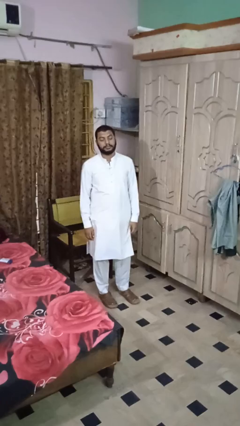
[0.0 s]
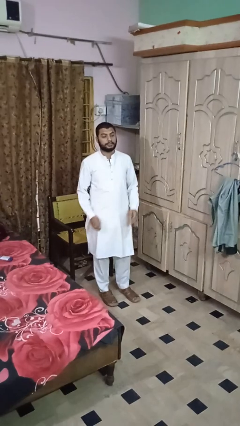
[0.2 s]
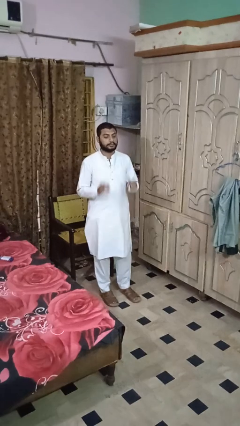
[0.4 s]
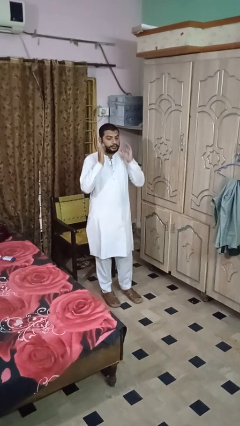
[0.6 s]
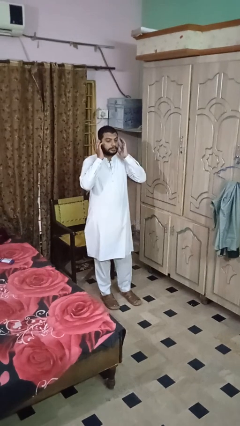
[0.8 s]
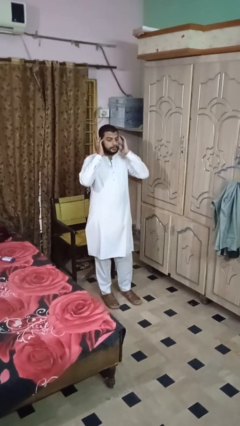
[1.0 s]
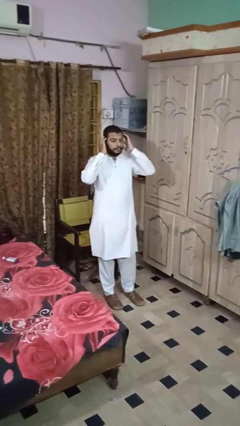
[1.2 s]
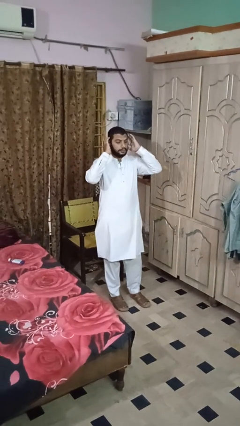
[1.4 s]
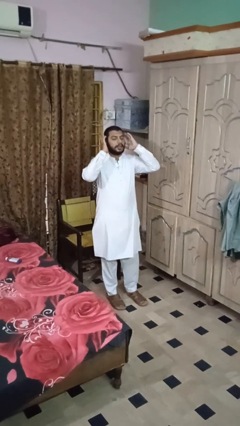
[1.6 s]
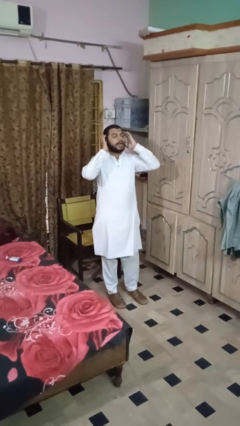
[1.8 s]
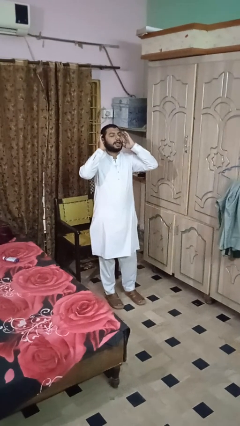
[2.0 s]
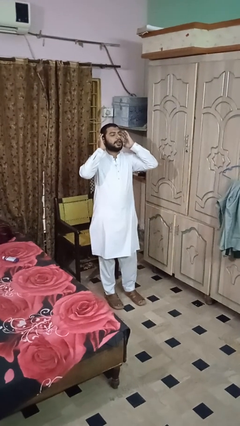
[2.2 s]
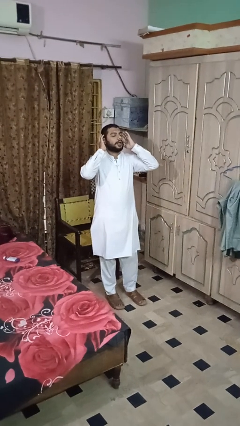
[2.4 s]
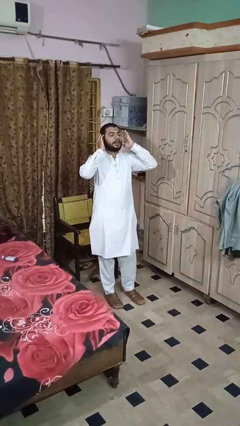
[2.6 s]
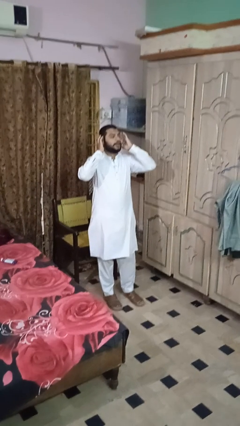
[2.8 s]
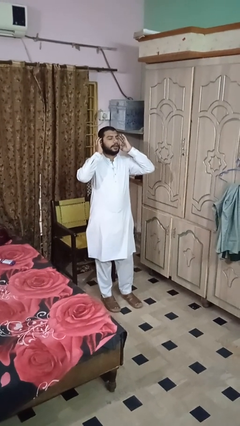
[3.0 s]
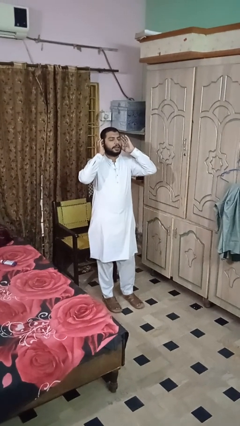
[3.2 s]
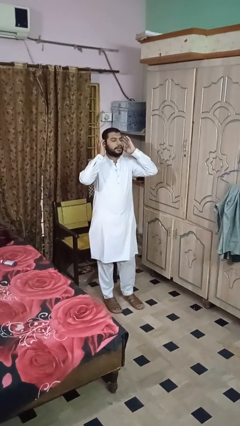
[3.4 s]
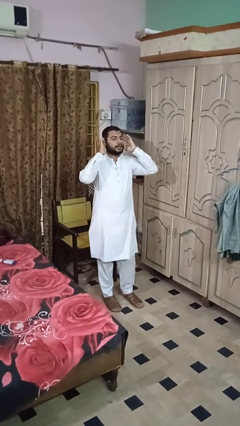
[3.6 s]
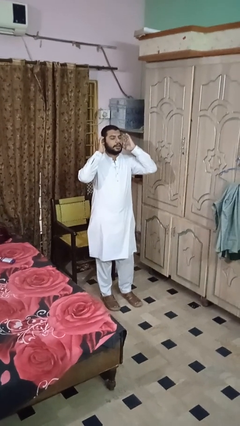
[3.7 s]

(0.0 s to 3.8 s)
person puts fingers in ear

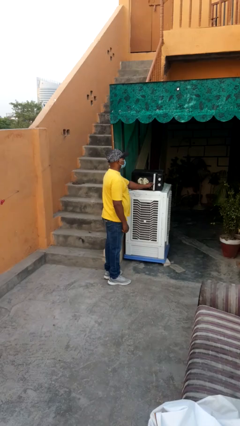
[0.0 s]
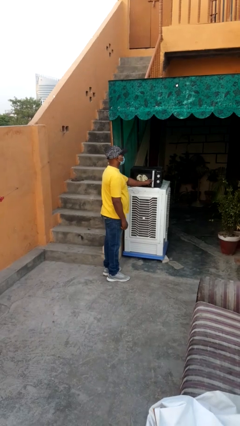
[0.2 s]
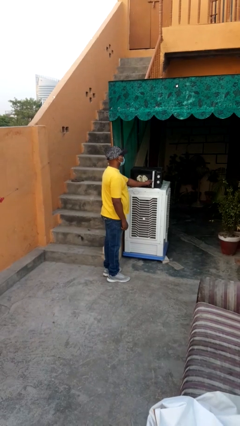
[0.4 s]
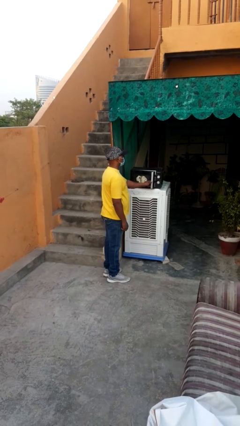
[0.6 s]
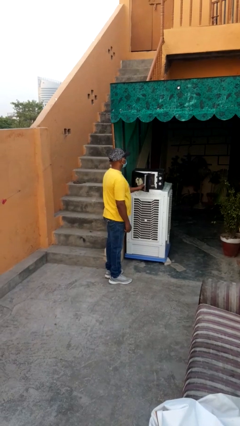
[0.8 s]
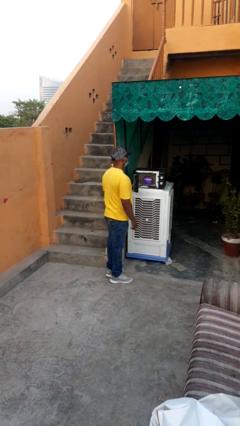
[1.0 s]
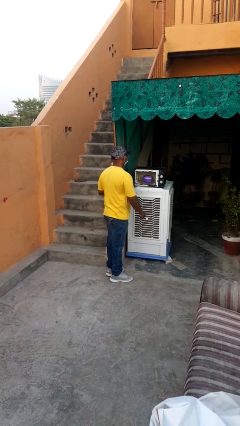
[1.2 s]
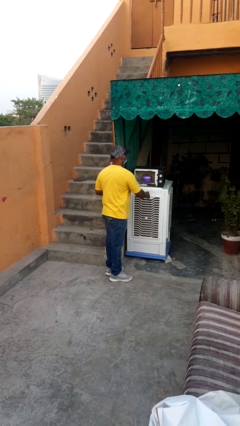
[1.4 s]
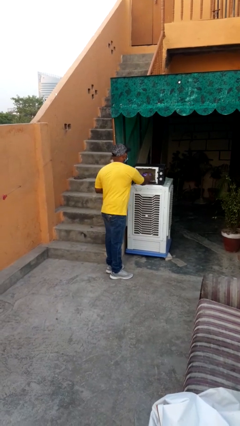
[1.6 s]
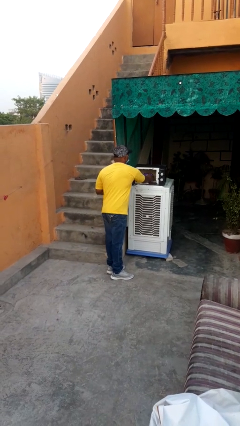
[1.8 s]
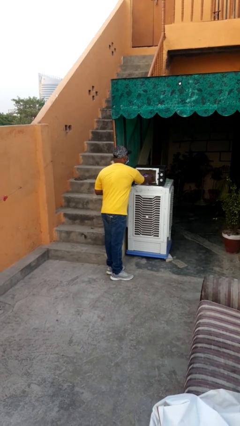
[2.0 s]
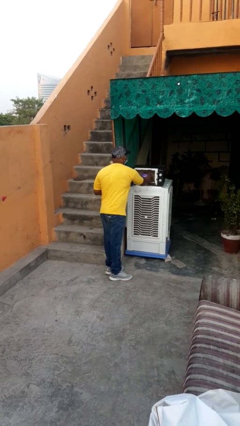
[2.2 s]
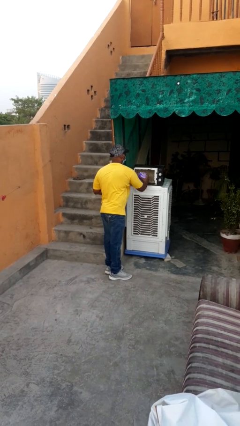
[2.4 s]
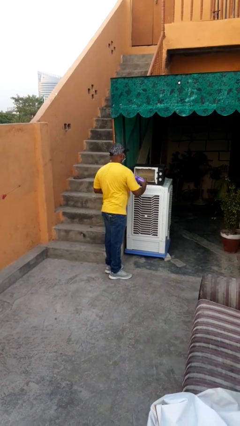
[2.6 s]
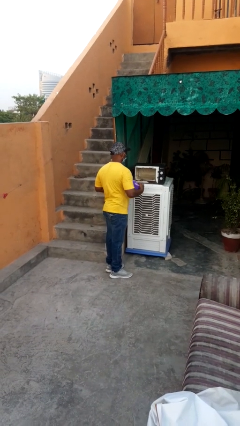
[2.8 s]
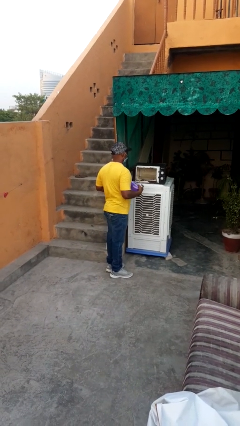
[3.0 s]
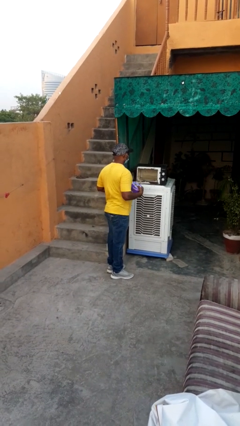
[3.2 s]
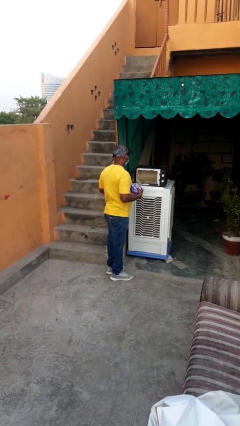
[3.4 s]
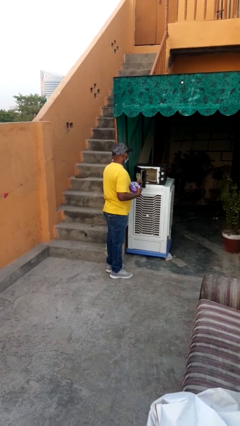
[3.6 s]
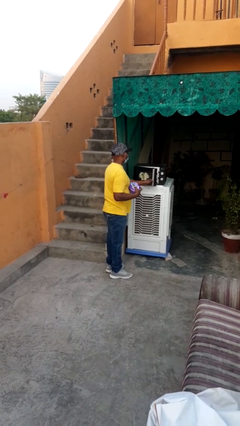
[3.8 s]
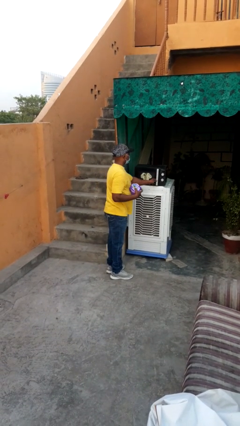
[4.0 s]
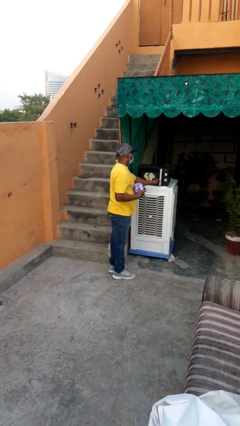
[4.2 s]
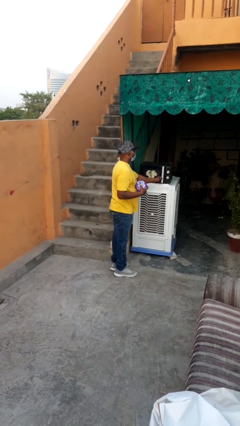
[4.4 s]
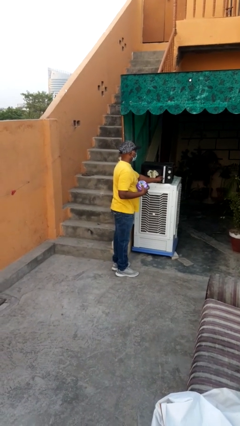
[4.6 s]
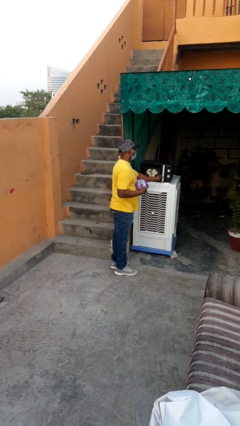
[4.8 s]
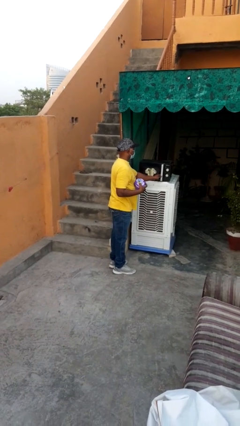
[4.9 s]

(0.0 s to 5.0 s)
person takes object from microwave

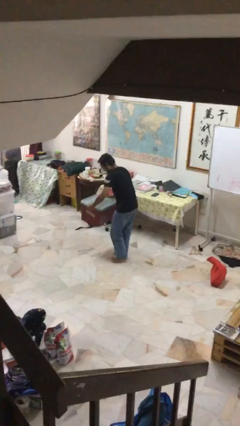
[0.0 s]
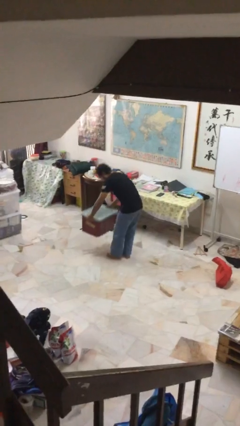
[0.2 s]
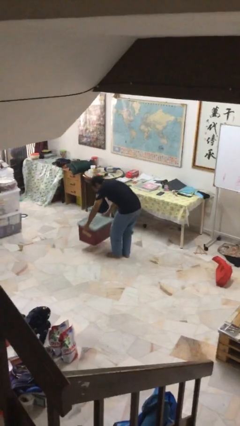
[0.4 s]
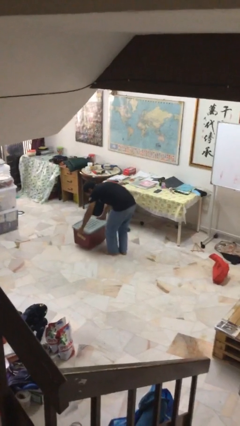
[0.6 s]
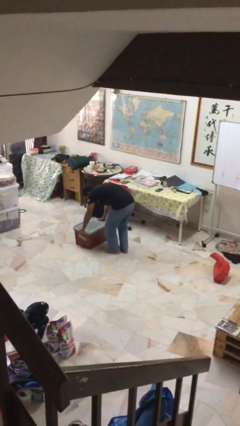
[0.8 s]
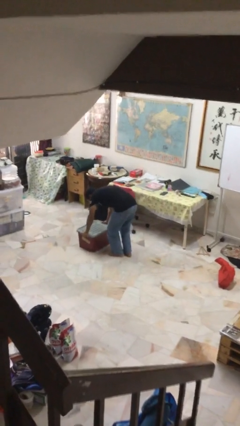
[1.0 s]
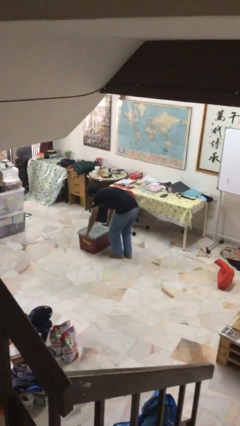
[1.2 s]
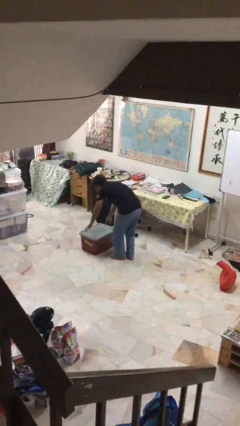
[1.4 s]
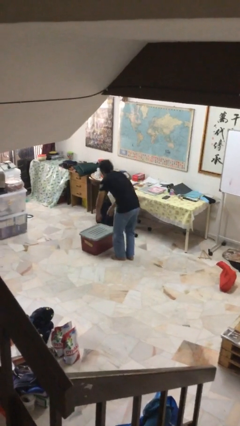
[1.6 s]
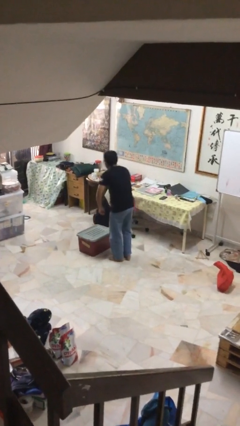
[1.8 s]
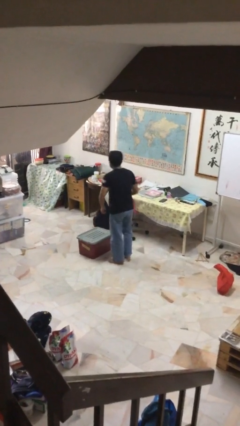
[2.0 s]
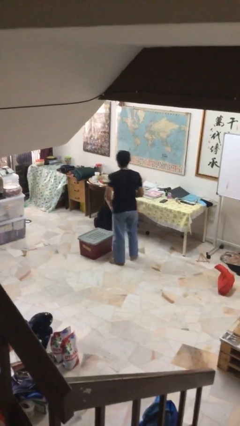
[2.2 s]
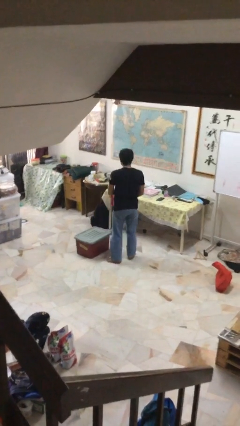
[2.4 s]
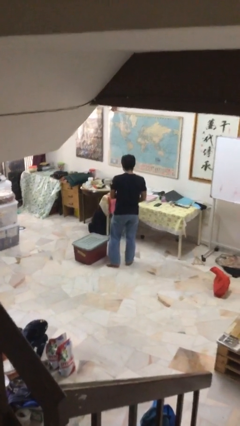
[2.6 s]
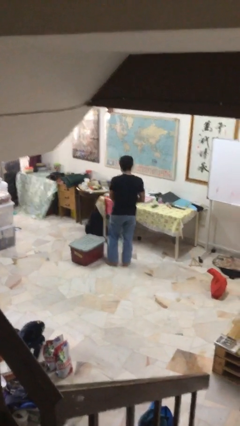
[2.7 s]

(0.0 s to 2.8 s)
person puts down object on floor

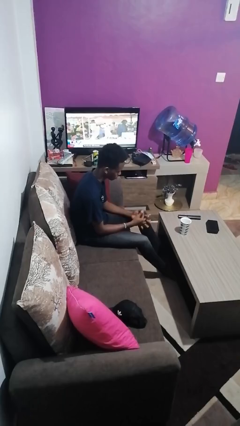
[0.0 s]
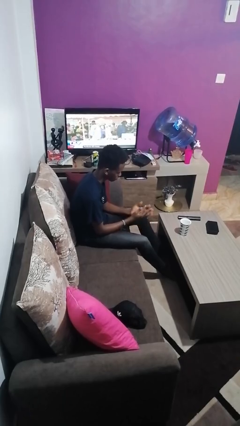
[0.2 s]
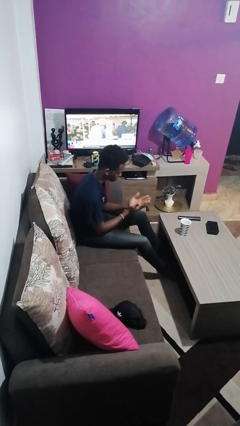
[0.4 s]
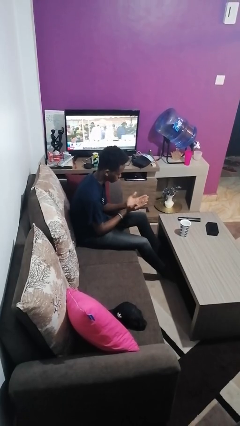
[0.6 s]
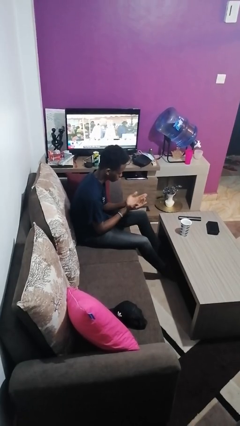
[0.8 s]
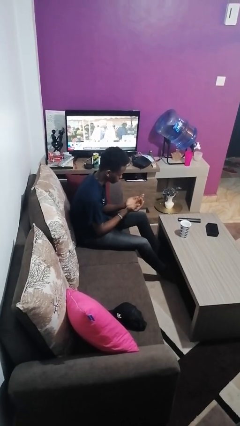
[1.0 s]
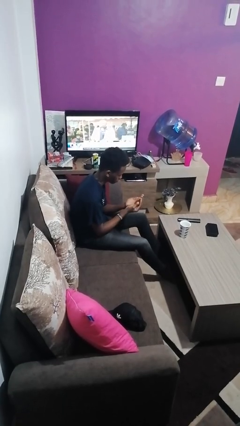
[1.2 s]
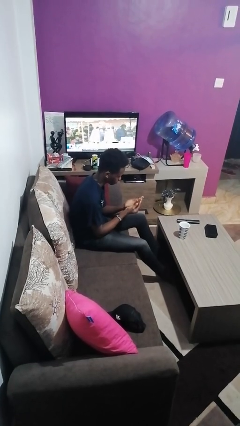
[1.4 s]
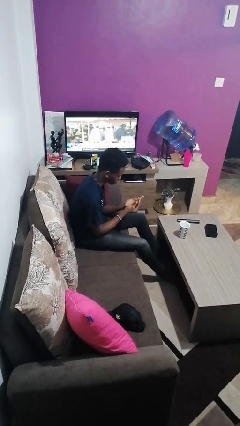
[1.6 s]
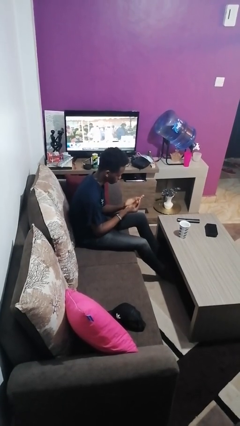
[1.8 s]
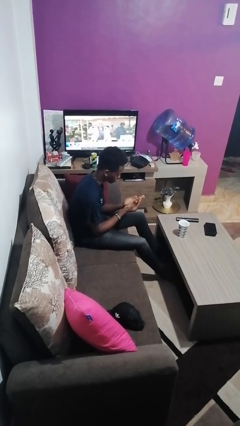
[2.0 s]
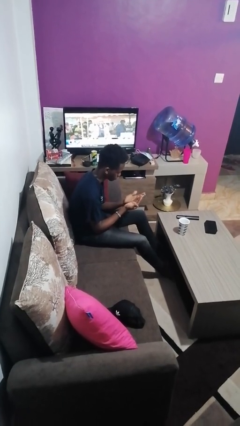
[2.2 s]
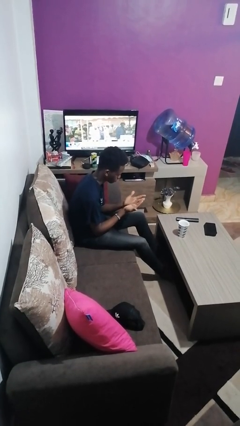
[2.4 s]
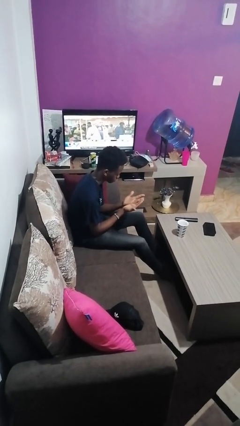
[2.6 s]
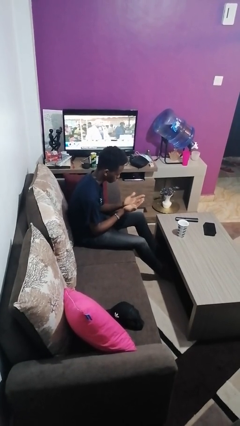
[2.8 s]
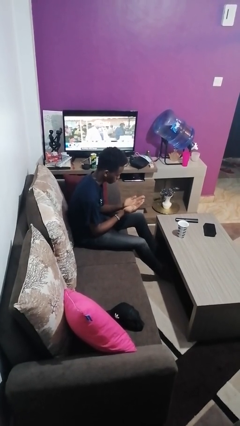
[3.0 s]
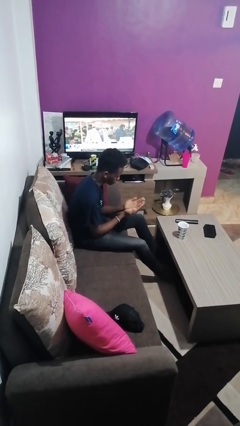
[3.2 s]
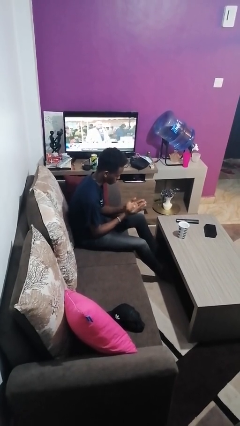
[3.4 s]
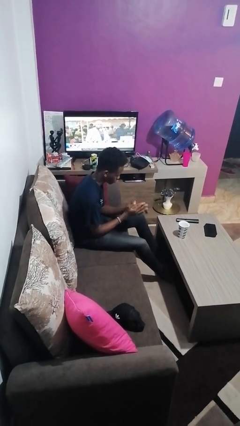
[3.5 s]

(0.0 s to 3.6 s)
person looks at hands in lap

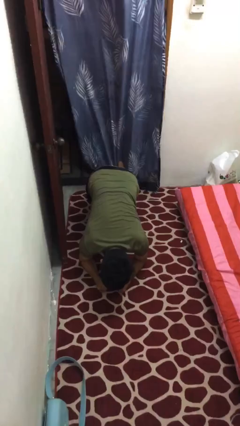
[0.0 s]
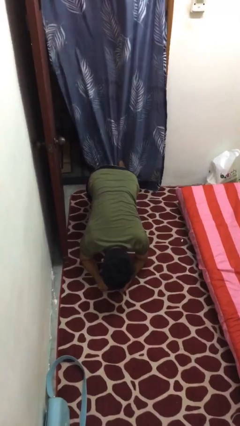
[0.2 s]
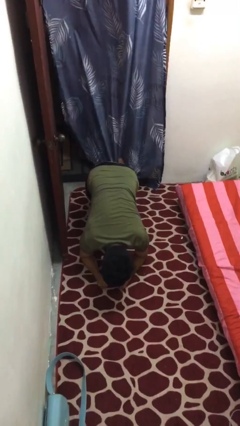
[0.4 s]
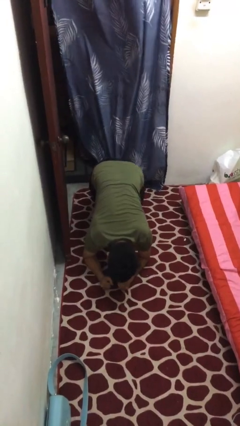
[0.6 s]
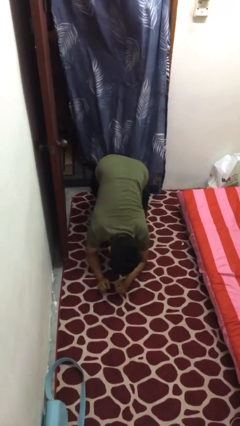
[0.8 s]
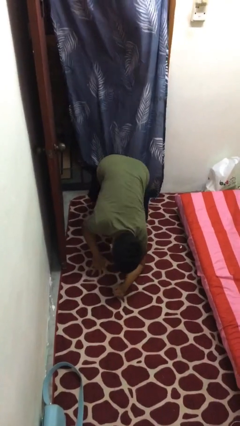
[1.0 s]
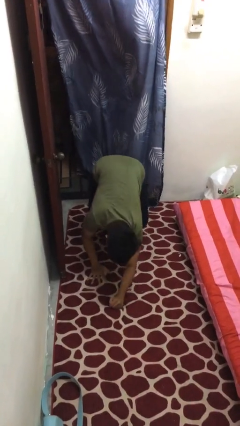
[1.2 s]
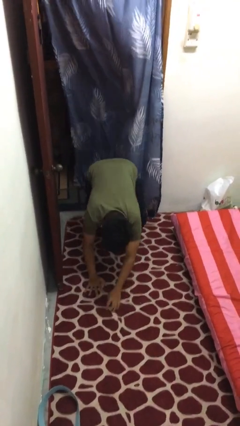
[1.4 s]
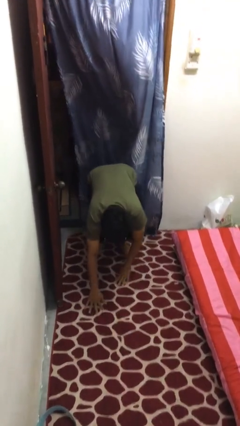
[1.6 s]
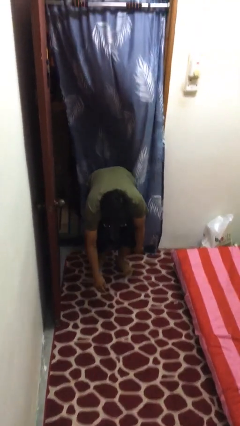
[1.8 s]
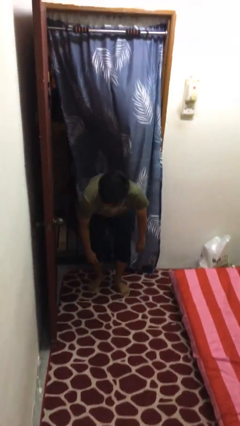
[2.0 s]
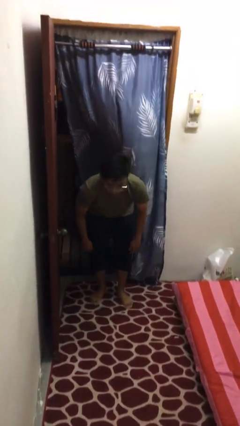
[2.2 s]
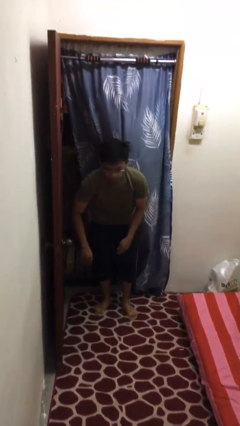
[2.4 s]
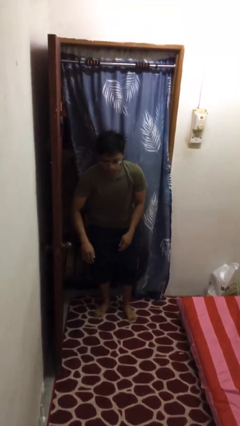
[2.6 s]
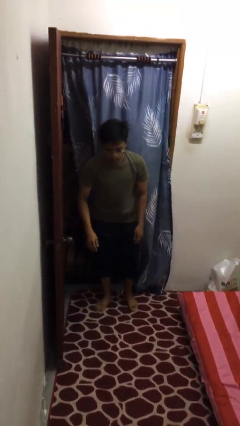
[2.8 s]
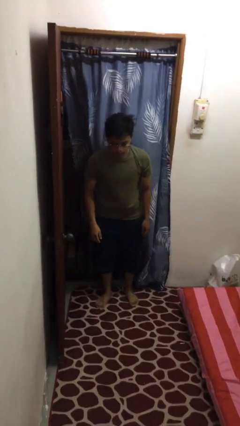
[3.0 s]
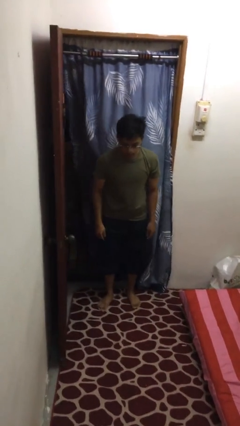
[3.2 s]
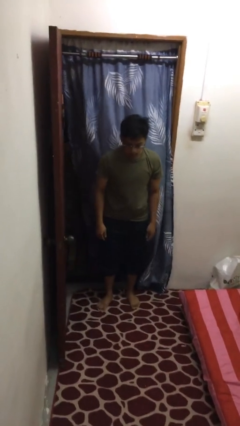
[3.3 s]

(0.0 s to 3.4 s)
person stands up from floor
